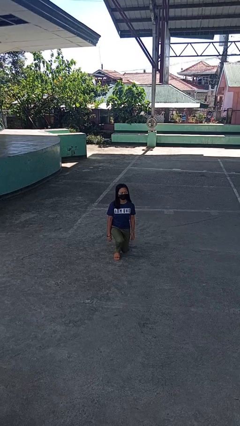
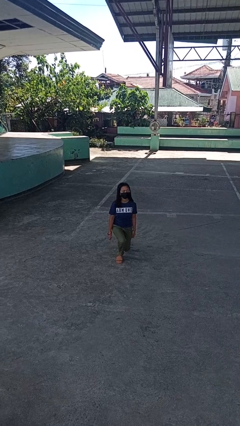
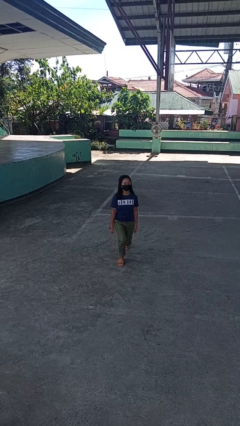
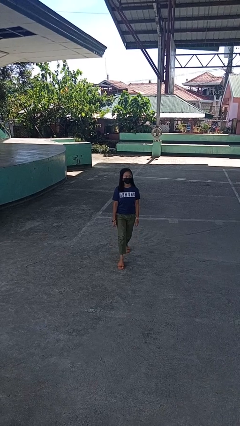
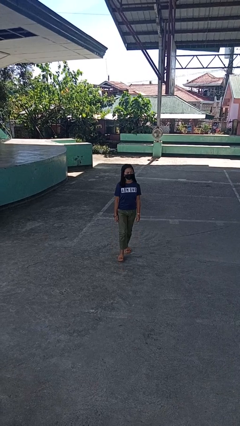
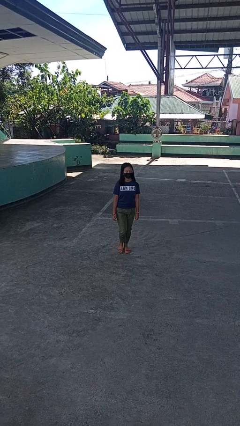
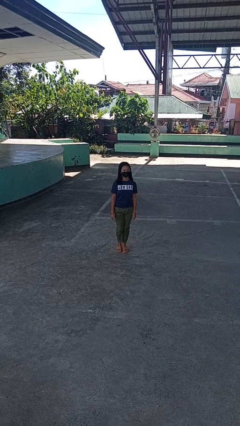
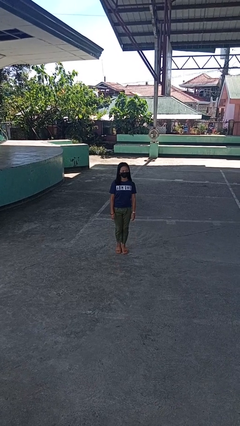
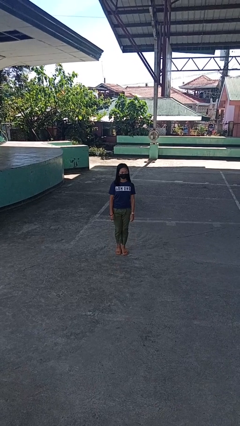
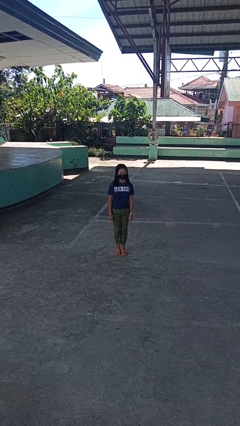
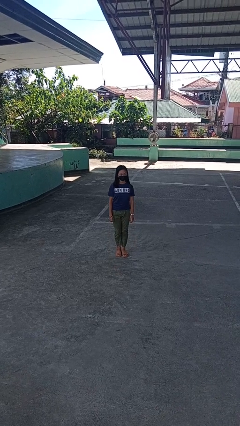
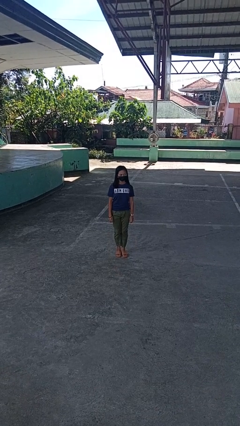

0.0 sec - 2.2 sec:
person stands up from floor

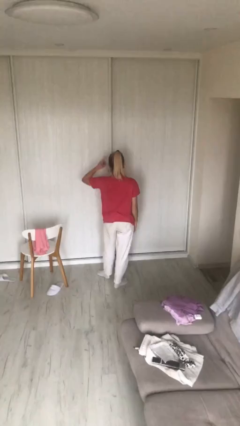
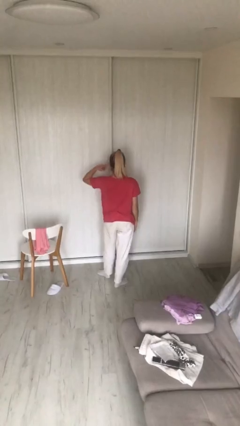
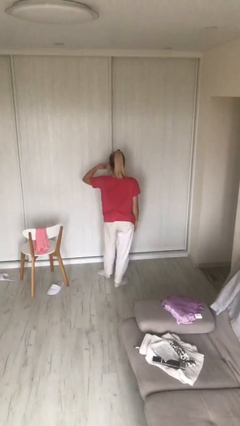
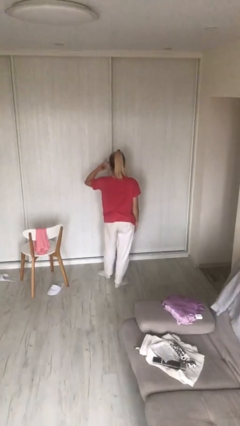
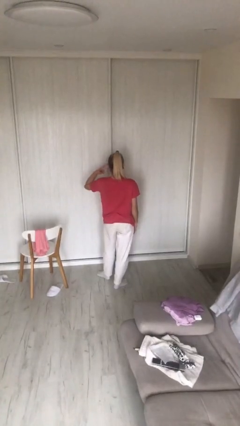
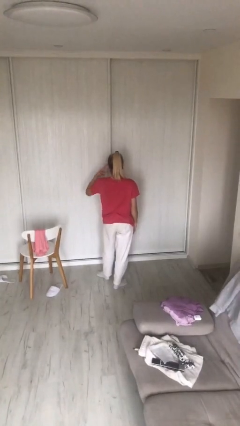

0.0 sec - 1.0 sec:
person gestures listen closely

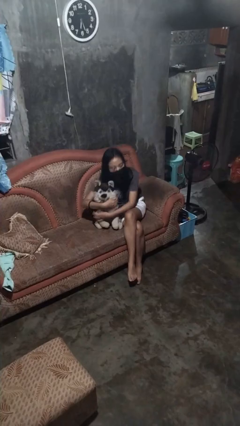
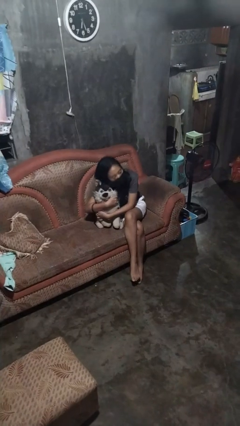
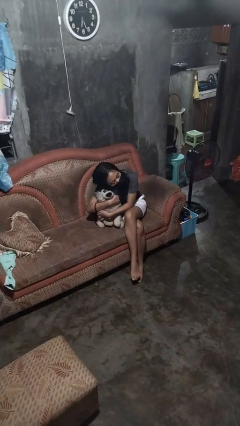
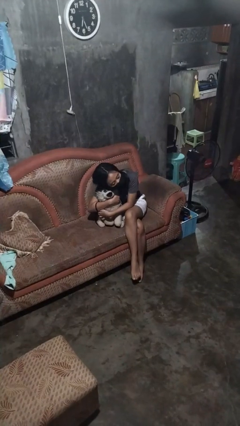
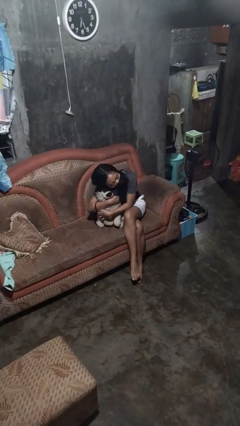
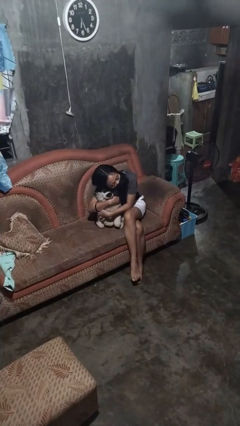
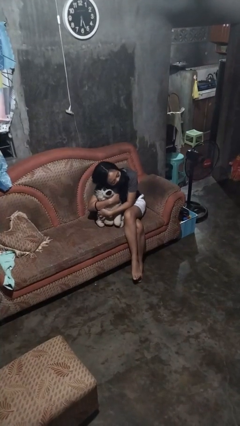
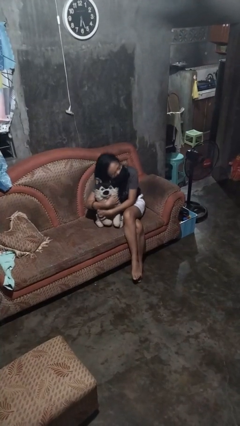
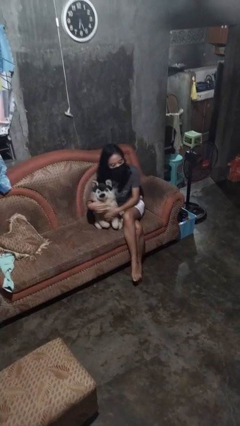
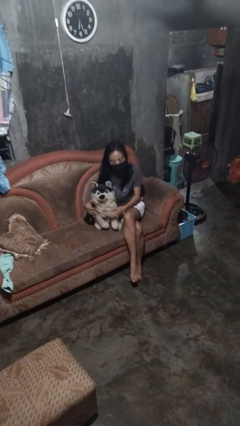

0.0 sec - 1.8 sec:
person hugs stuffed animal

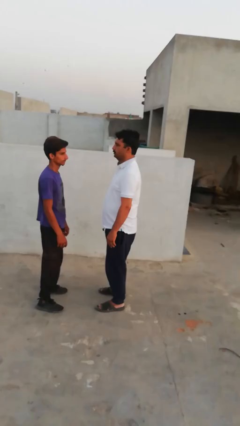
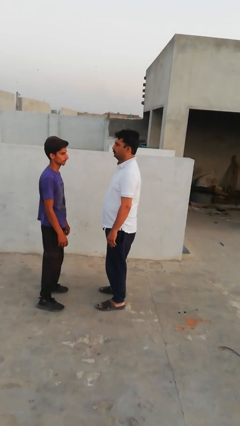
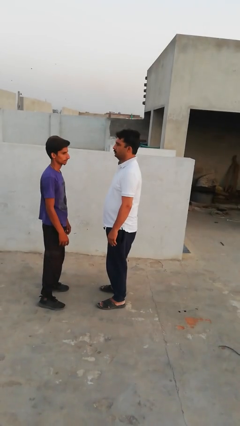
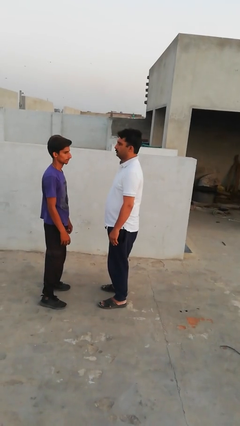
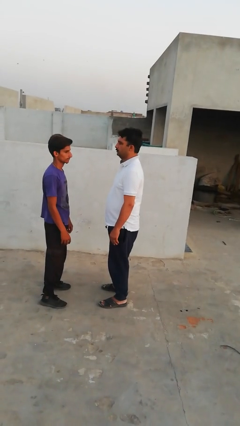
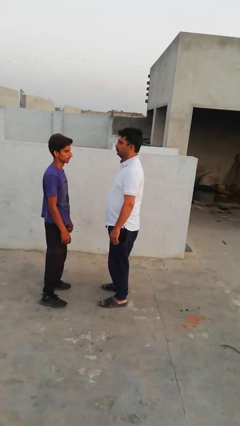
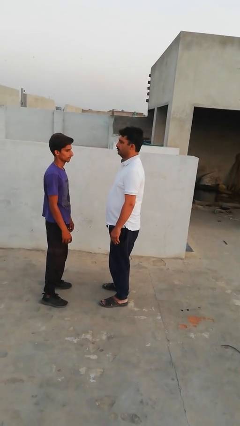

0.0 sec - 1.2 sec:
person highfives hand

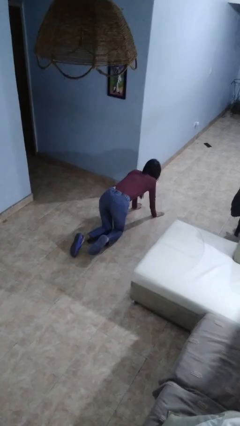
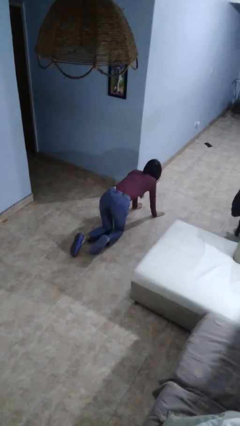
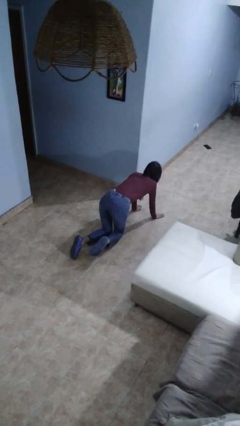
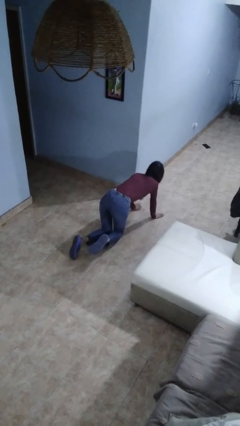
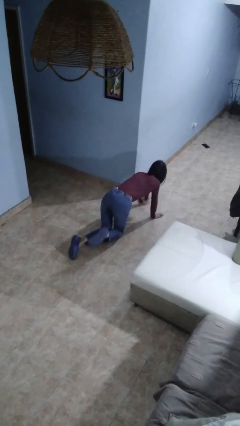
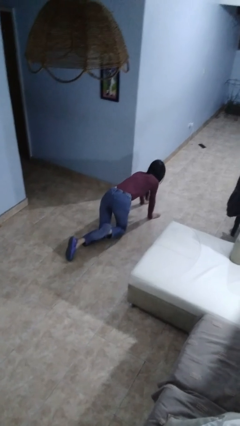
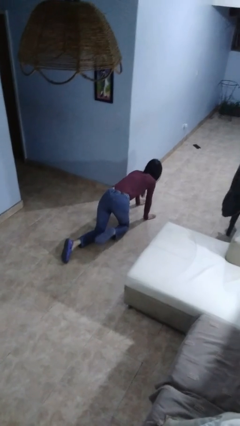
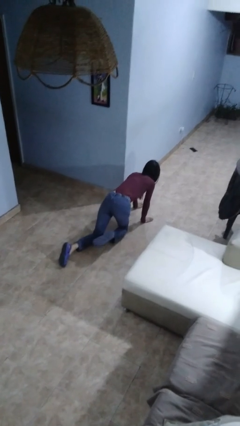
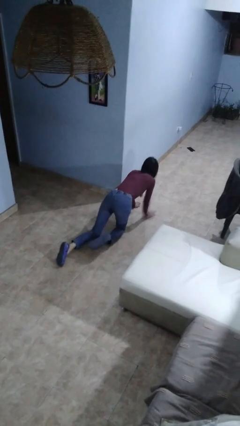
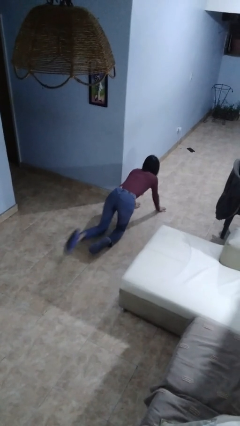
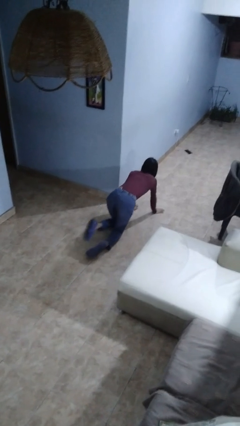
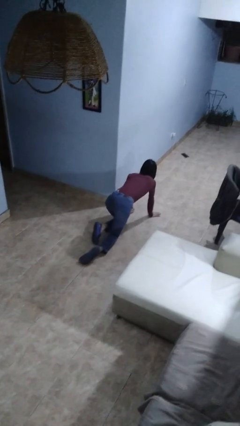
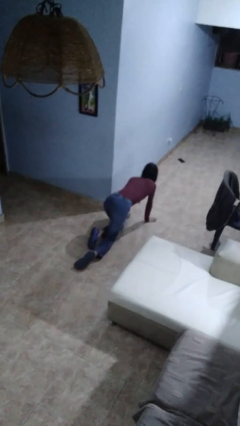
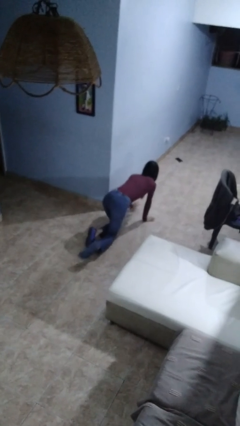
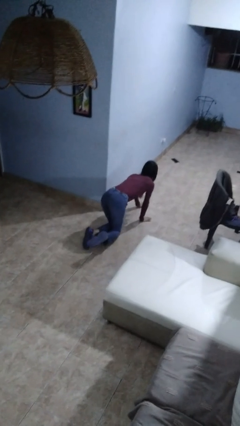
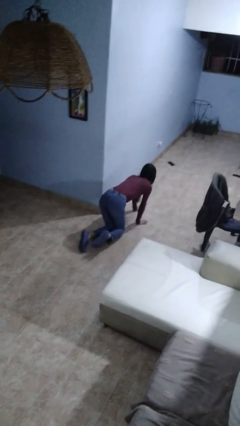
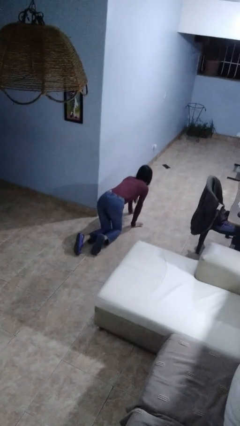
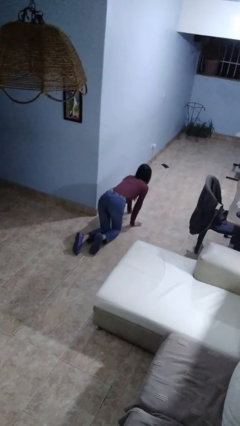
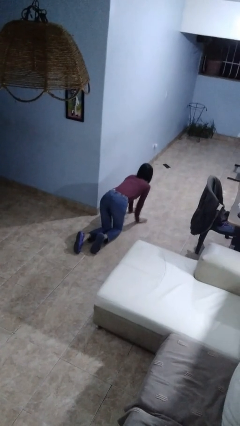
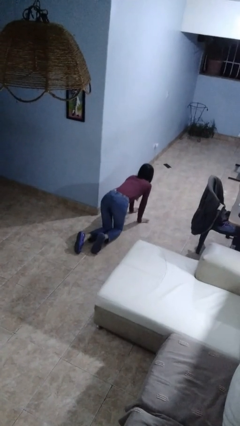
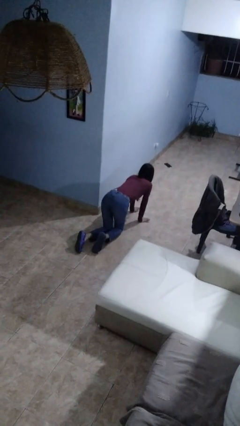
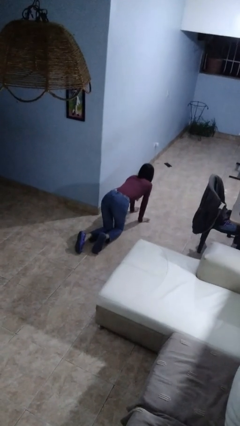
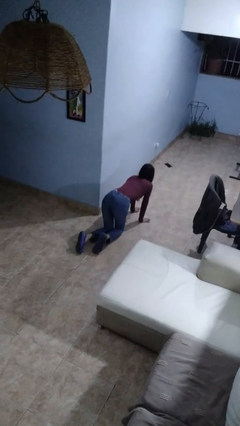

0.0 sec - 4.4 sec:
person crawls

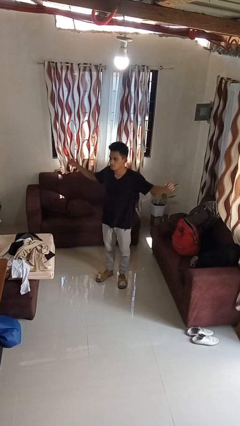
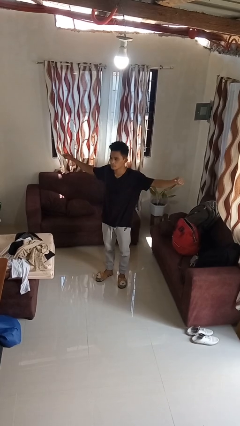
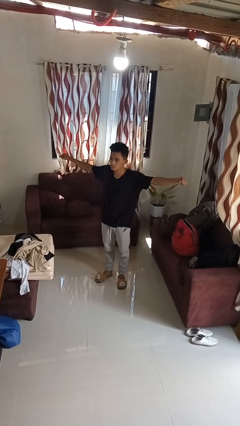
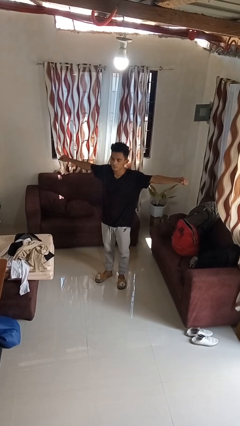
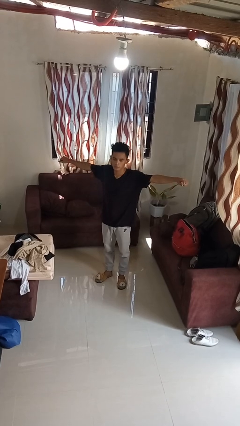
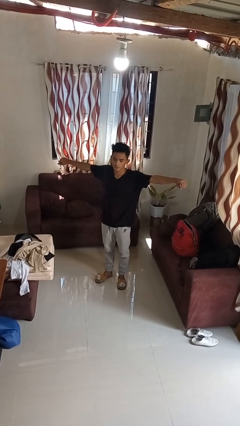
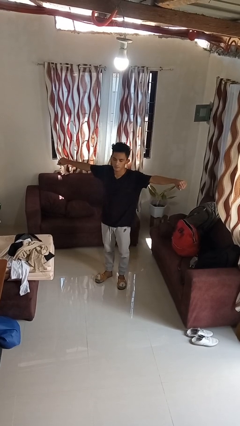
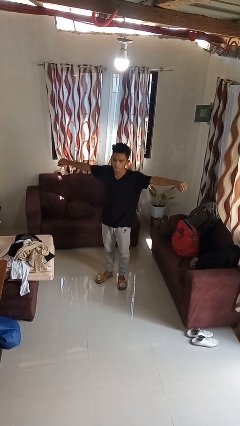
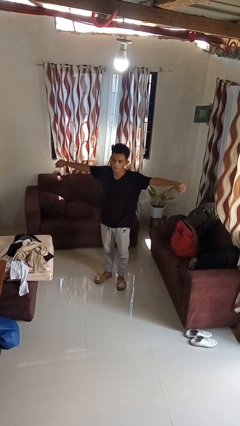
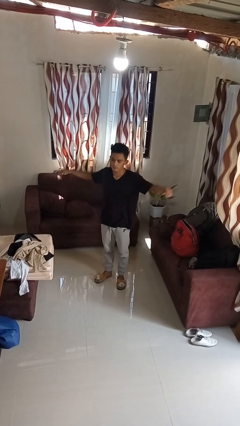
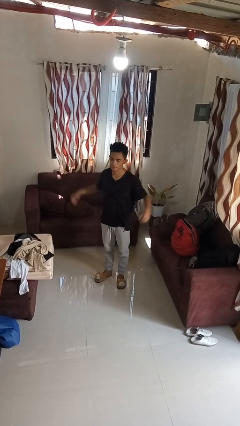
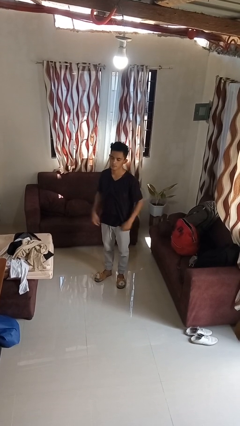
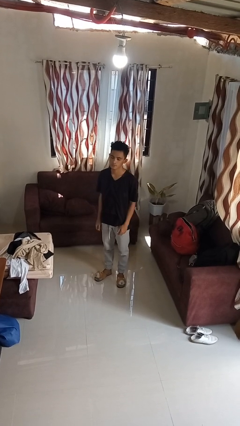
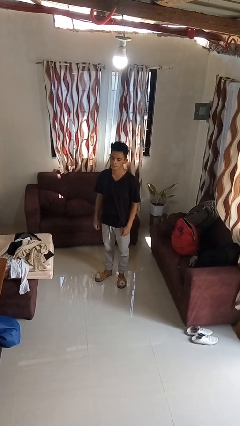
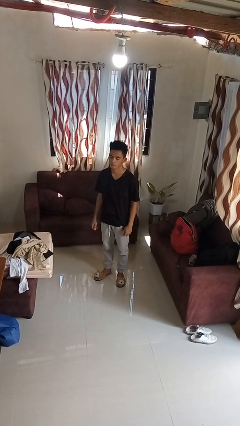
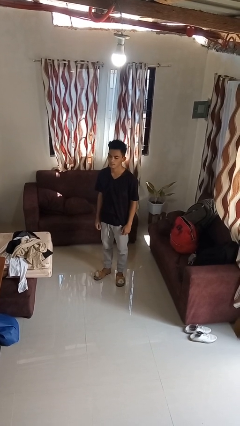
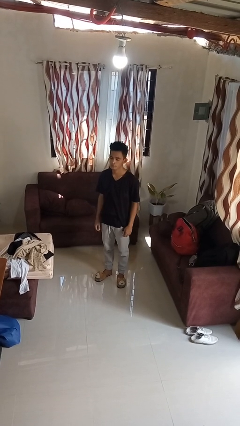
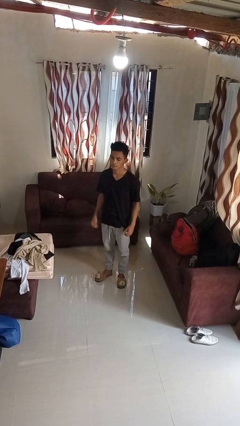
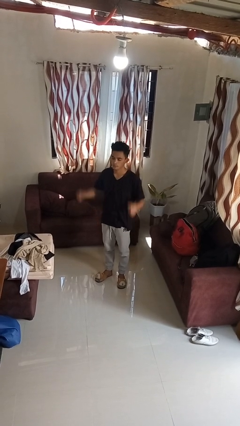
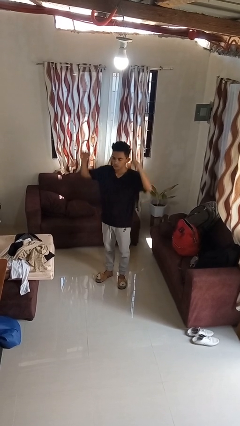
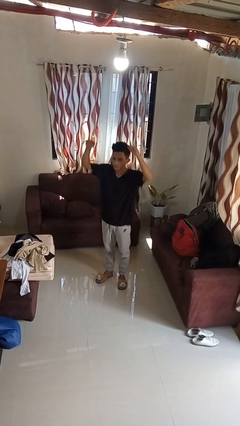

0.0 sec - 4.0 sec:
person stretches arms to side

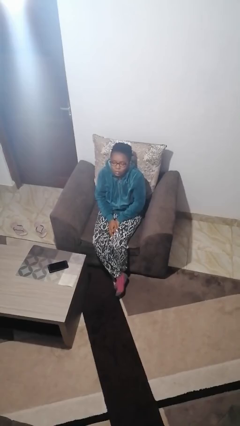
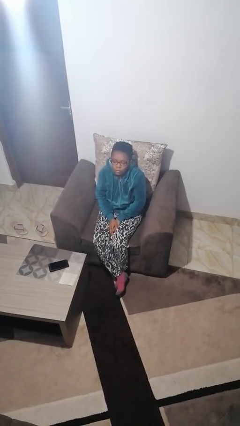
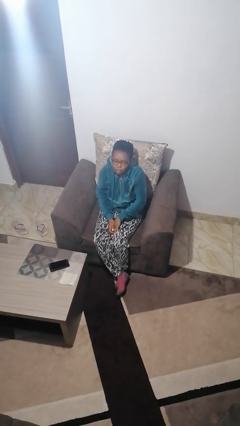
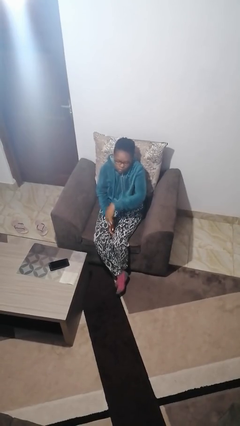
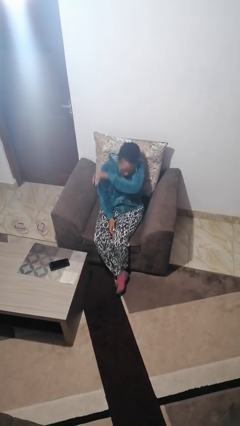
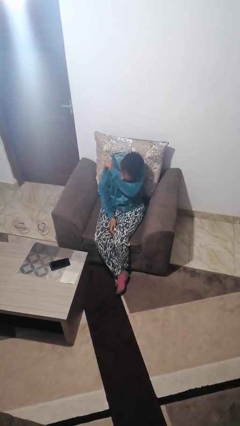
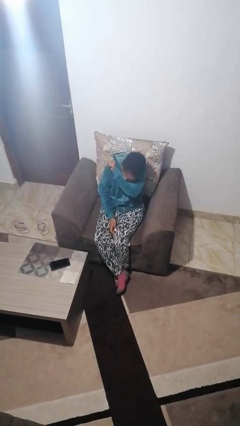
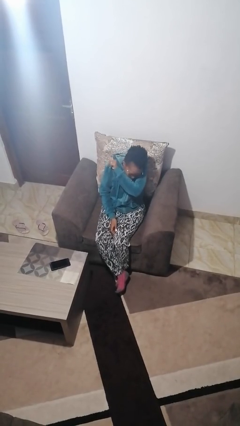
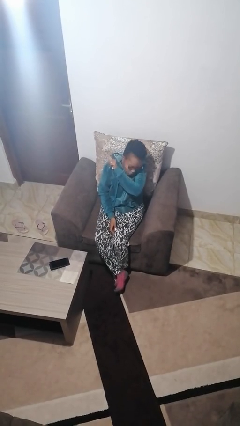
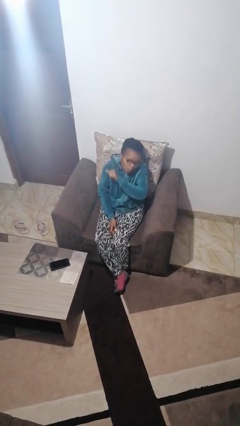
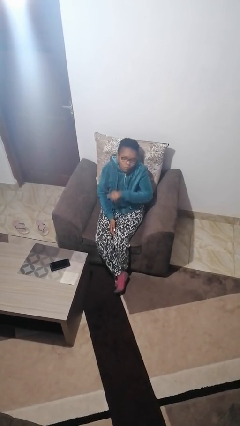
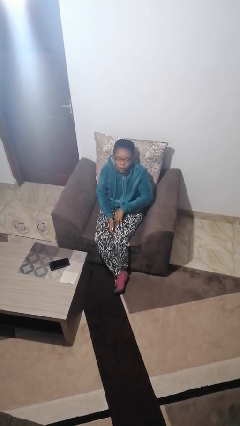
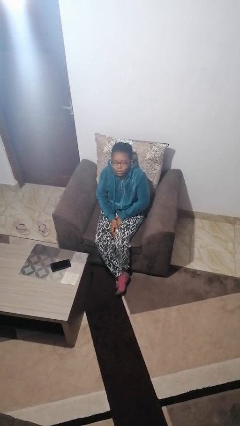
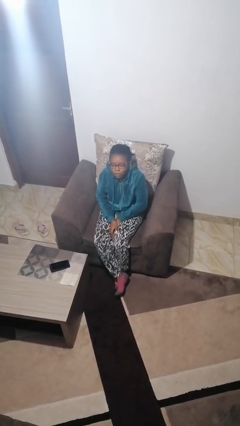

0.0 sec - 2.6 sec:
person sneezes into arm
